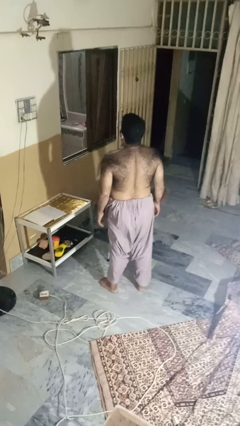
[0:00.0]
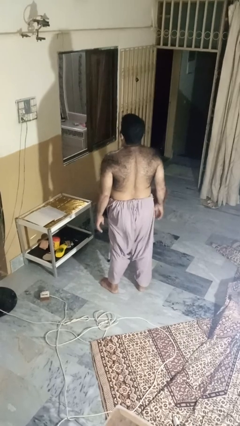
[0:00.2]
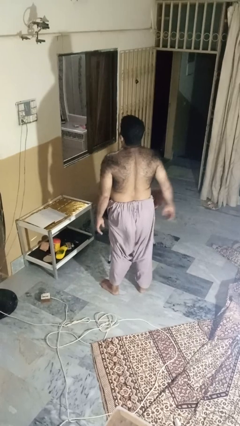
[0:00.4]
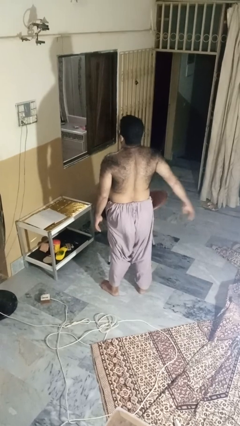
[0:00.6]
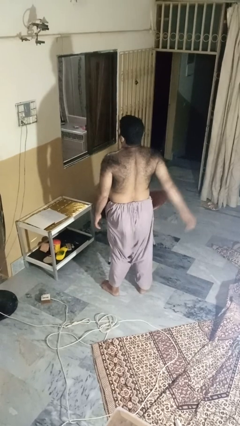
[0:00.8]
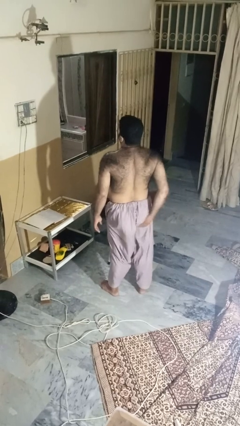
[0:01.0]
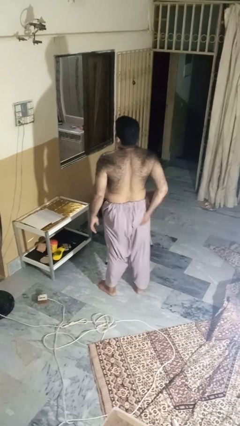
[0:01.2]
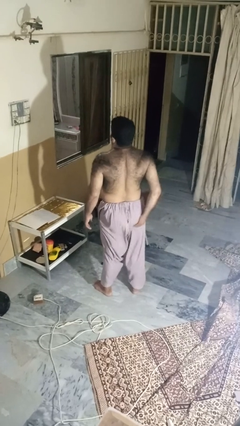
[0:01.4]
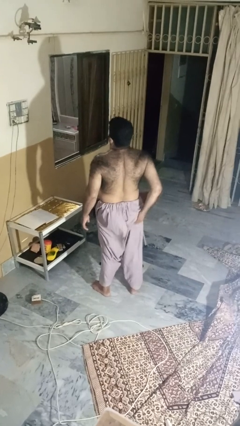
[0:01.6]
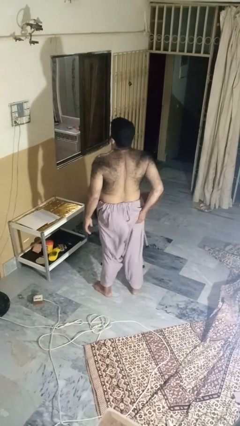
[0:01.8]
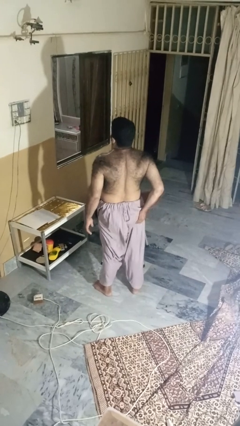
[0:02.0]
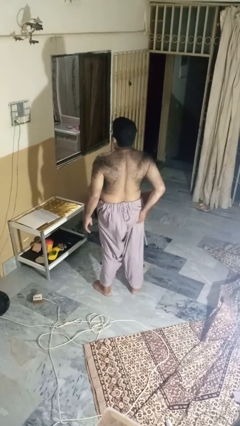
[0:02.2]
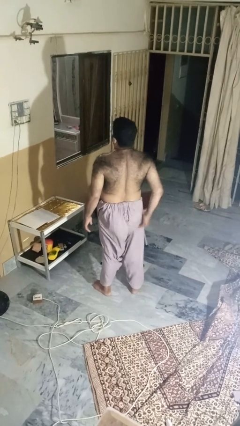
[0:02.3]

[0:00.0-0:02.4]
person wiggles hips

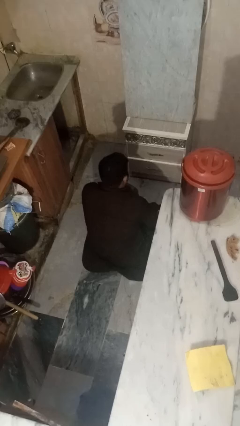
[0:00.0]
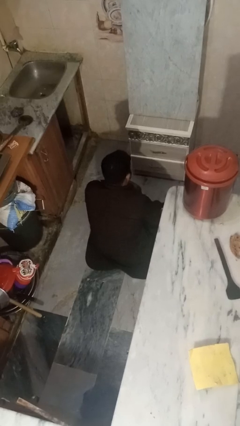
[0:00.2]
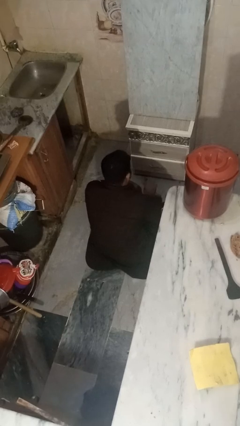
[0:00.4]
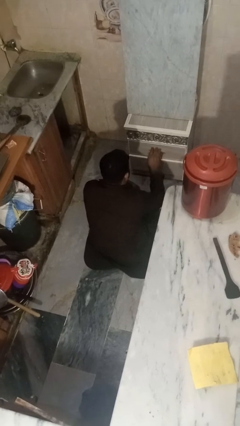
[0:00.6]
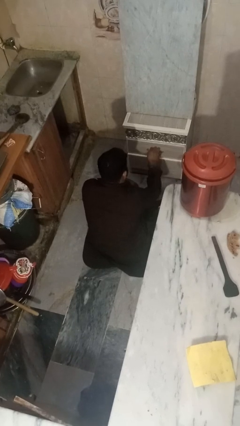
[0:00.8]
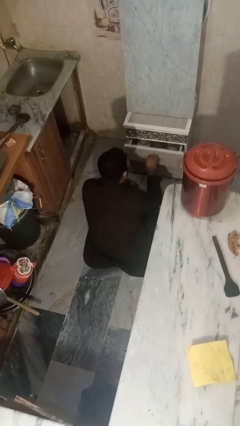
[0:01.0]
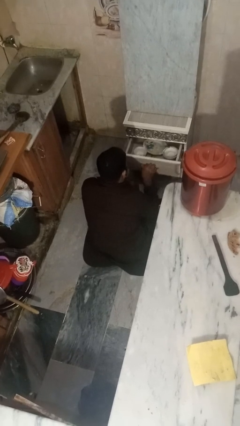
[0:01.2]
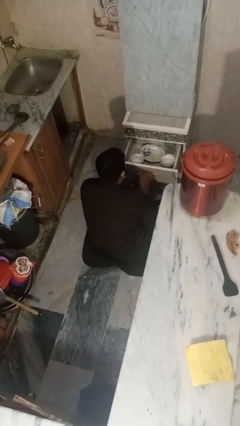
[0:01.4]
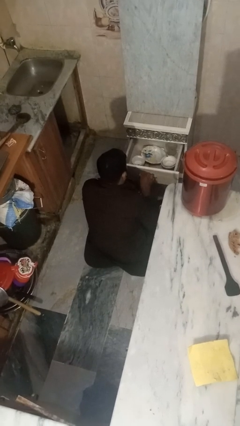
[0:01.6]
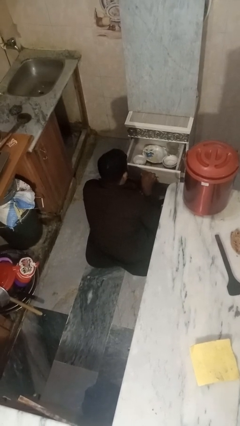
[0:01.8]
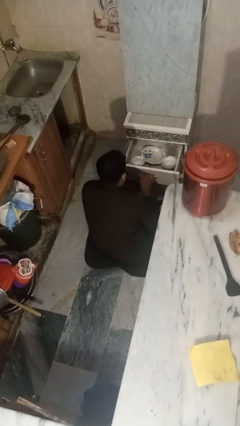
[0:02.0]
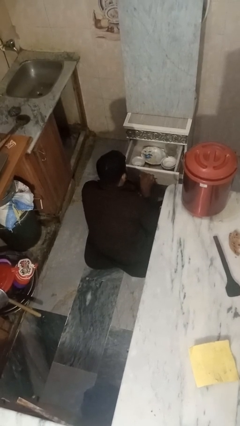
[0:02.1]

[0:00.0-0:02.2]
person opens kitchen drawer

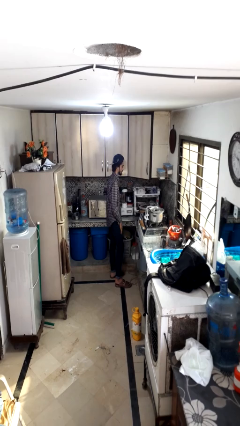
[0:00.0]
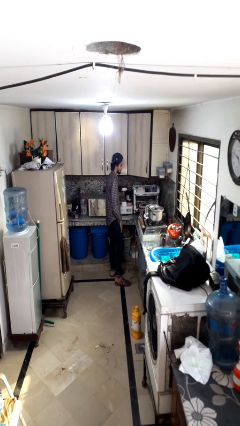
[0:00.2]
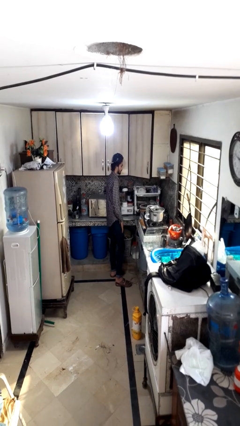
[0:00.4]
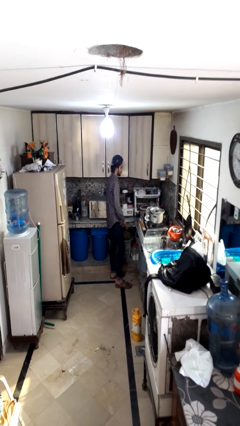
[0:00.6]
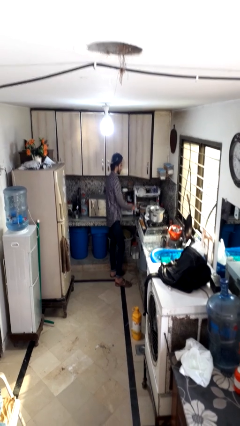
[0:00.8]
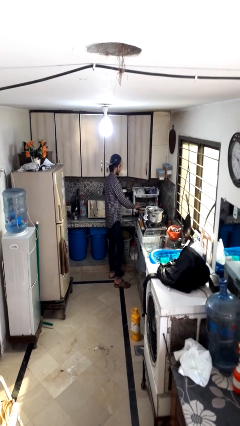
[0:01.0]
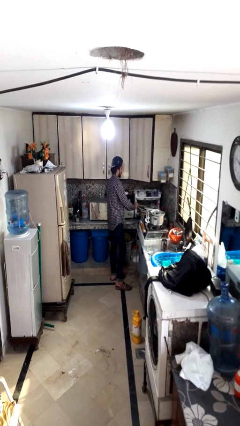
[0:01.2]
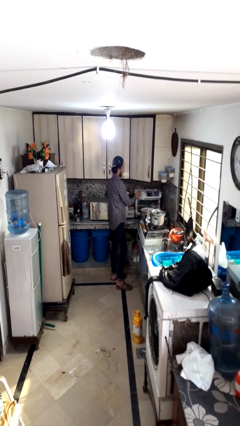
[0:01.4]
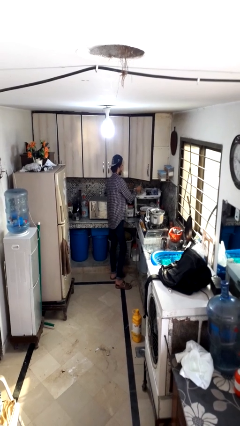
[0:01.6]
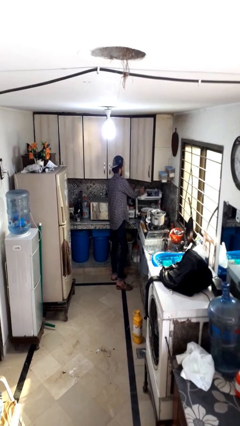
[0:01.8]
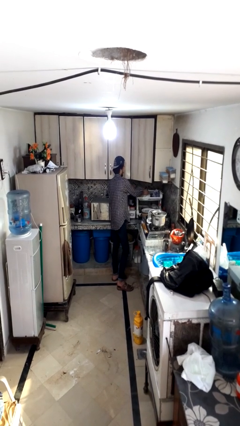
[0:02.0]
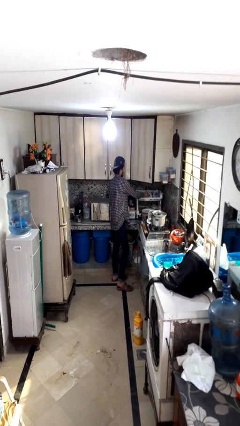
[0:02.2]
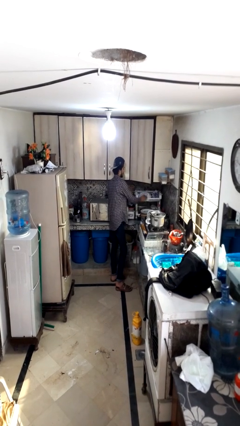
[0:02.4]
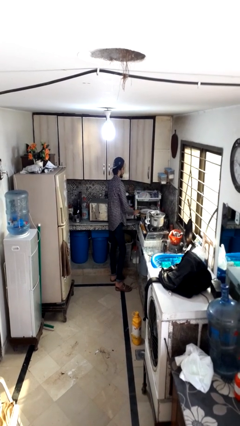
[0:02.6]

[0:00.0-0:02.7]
person loads dishwasher

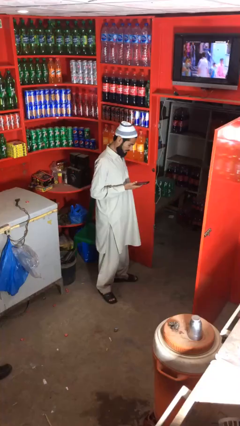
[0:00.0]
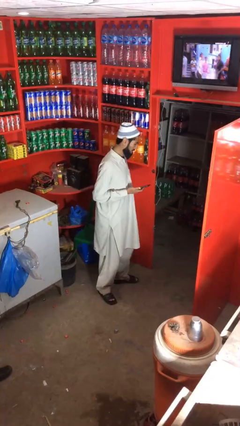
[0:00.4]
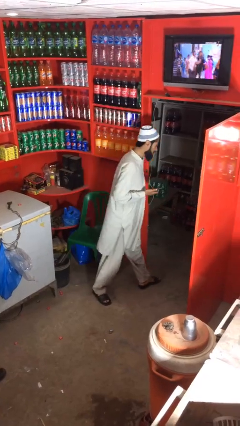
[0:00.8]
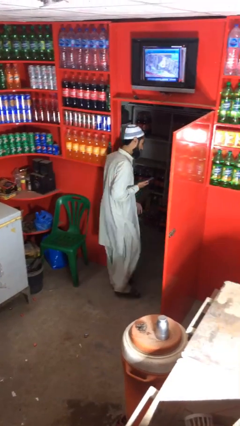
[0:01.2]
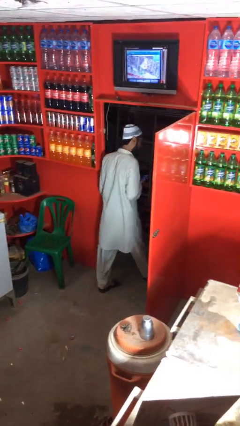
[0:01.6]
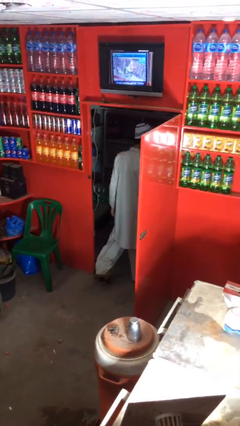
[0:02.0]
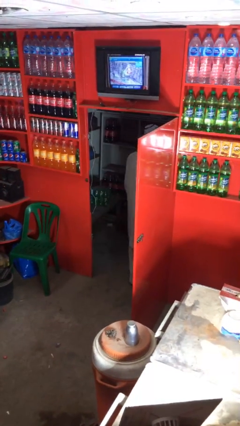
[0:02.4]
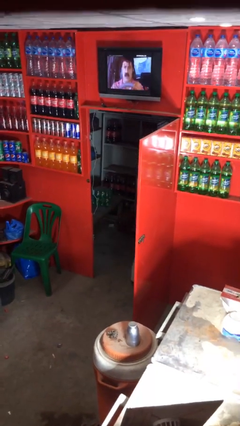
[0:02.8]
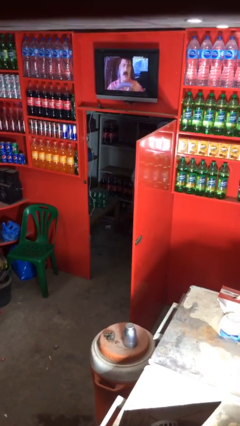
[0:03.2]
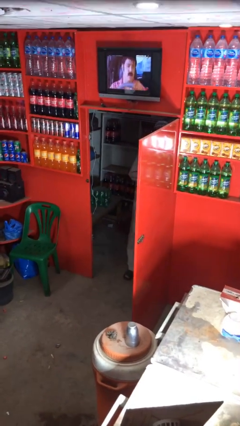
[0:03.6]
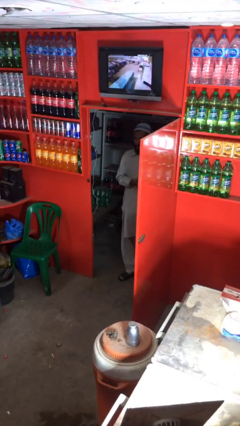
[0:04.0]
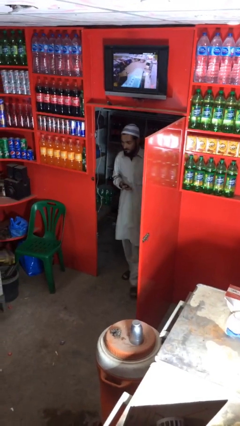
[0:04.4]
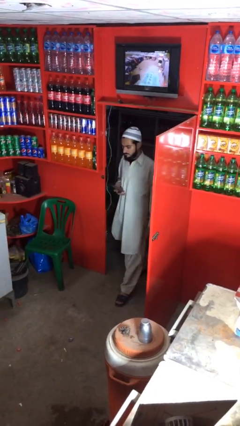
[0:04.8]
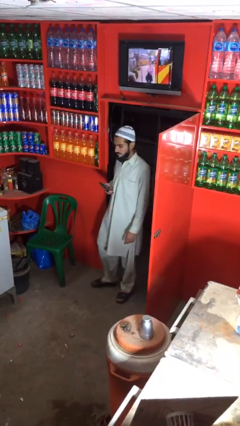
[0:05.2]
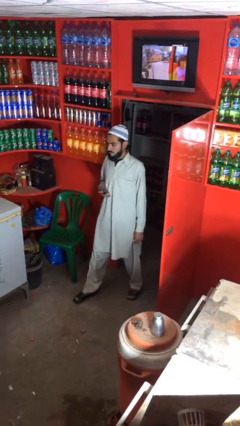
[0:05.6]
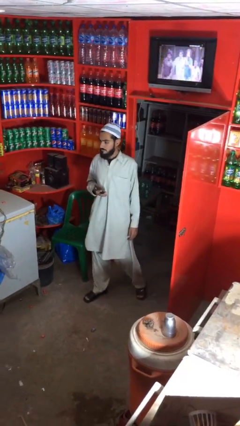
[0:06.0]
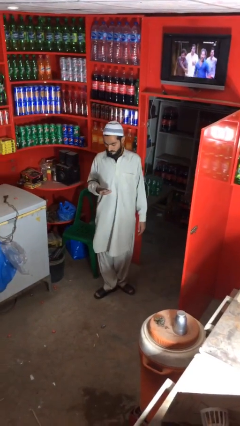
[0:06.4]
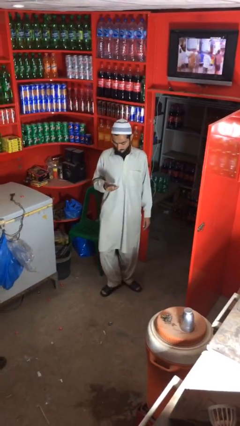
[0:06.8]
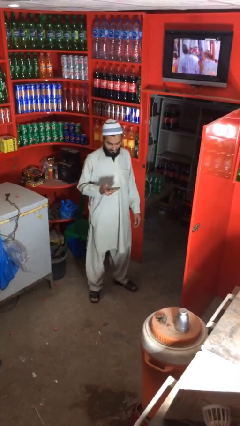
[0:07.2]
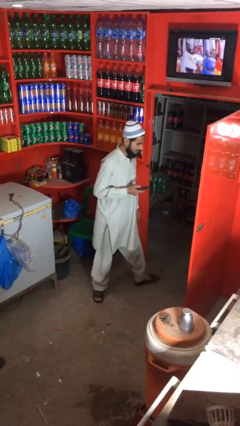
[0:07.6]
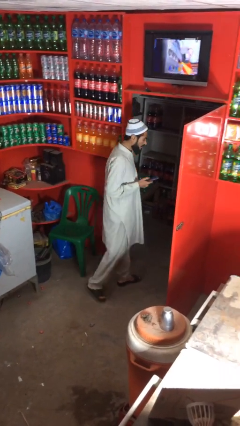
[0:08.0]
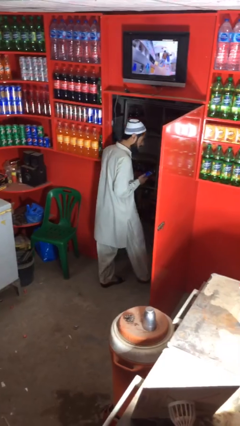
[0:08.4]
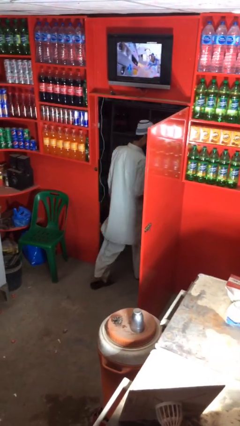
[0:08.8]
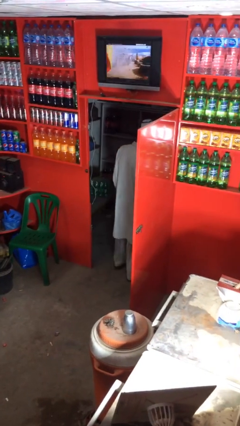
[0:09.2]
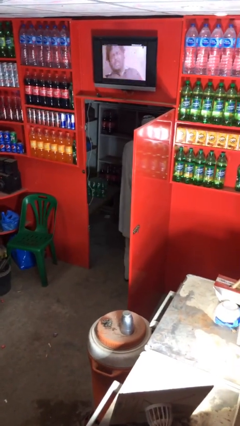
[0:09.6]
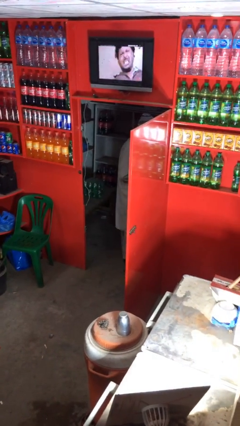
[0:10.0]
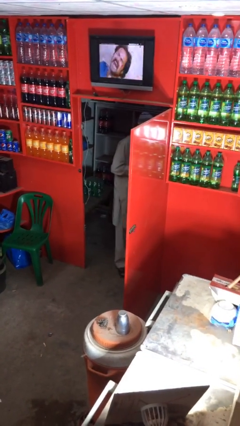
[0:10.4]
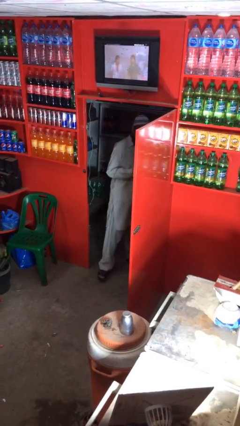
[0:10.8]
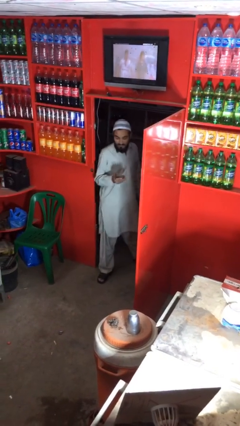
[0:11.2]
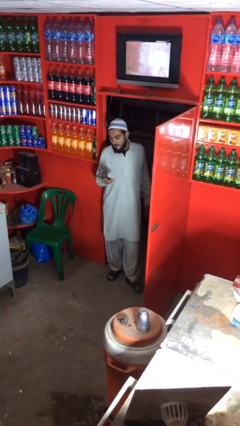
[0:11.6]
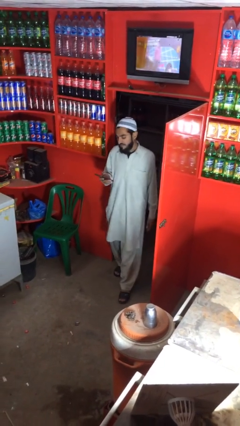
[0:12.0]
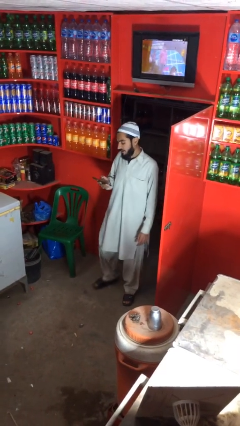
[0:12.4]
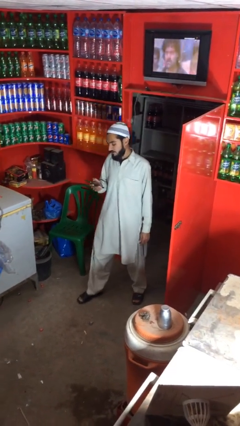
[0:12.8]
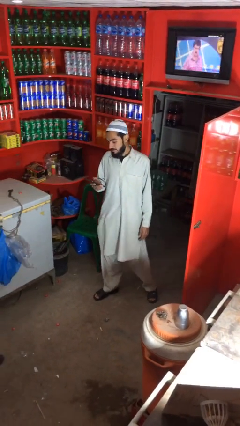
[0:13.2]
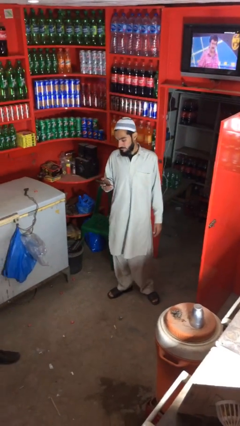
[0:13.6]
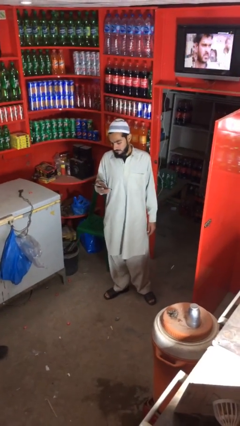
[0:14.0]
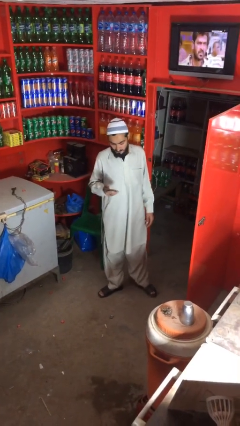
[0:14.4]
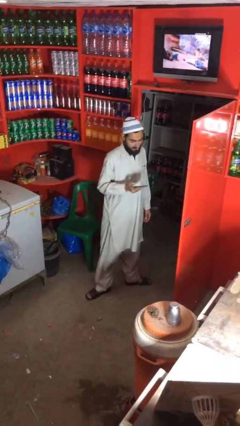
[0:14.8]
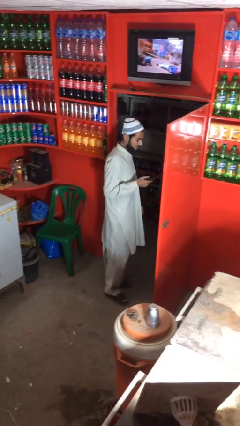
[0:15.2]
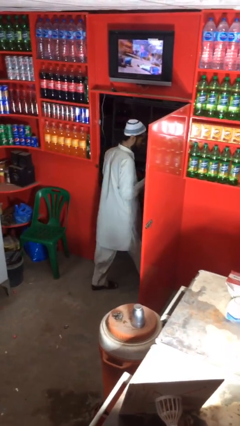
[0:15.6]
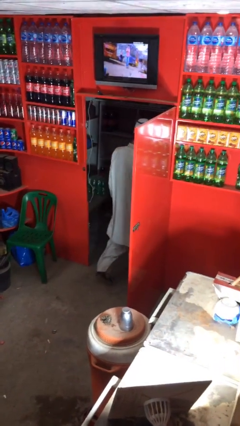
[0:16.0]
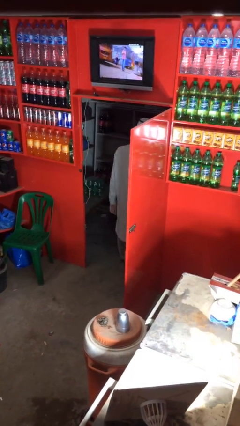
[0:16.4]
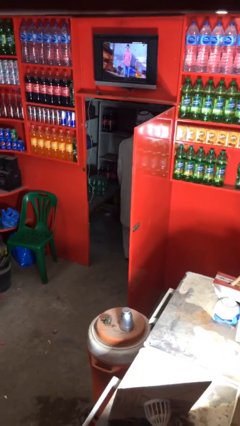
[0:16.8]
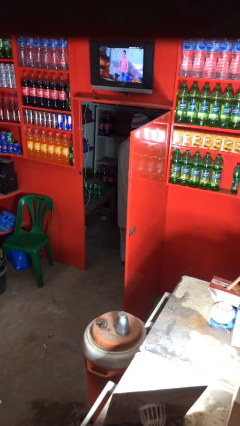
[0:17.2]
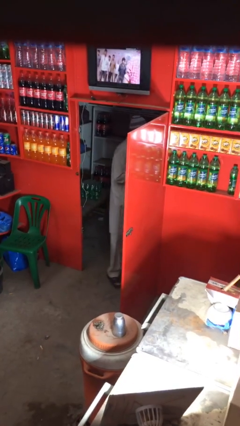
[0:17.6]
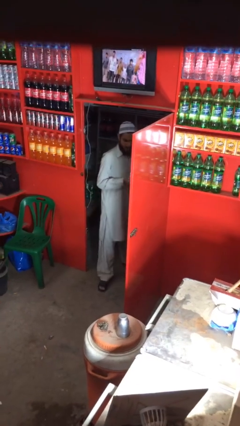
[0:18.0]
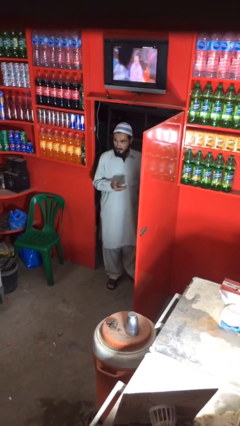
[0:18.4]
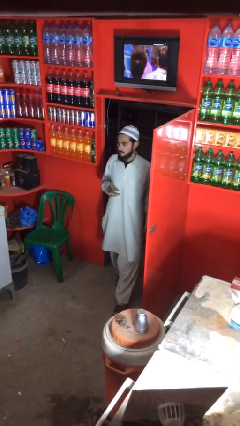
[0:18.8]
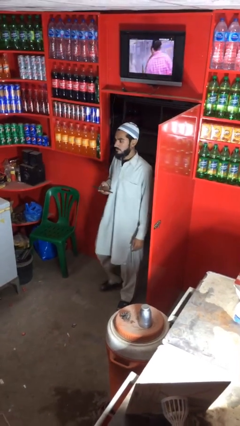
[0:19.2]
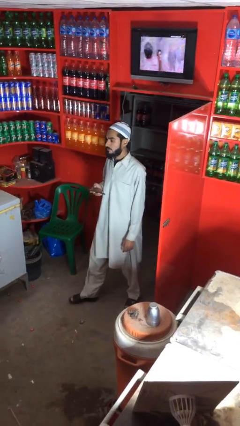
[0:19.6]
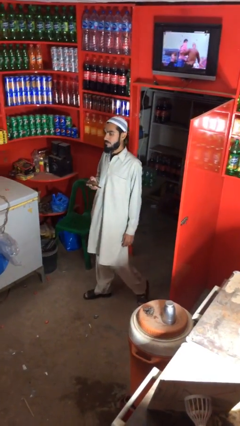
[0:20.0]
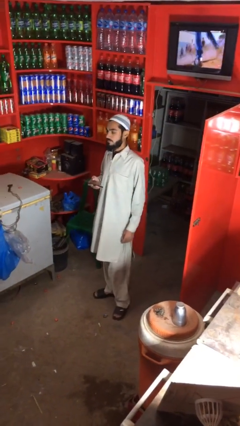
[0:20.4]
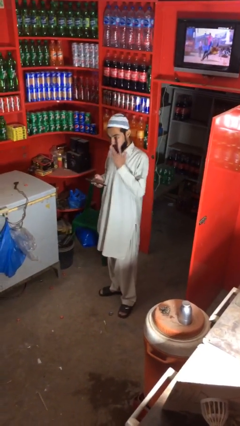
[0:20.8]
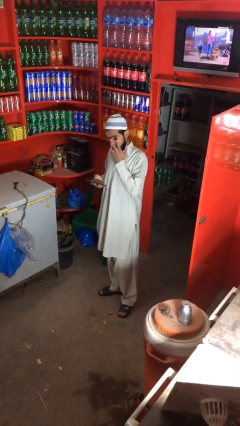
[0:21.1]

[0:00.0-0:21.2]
person texts on phone
